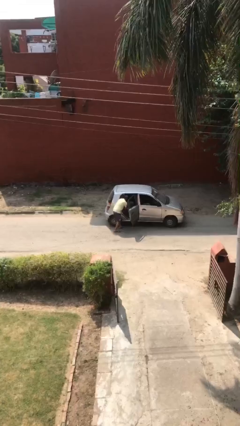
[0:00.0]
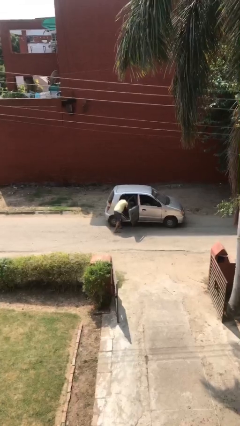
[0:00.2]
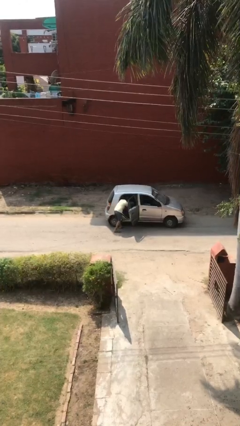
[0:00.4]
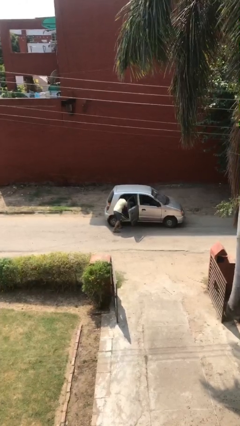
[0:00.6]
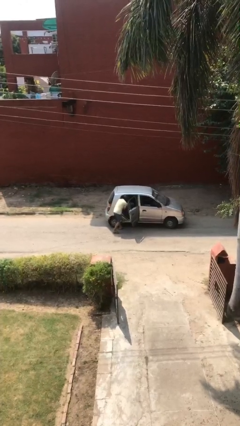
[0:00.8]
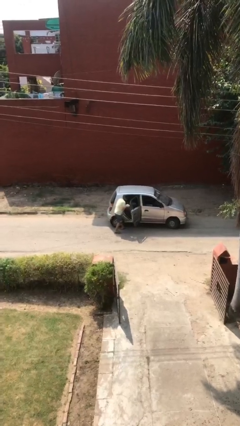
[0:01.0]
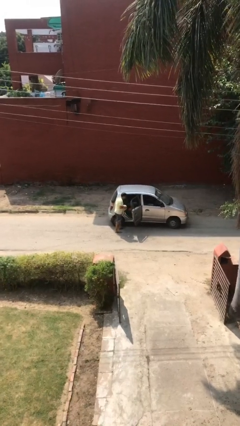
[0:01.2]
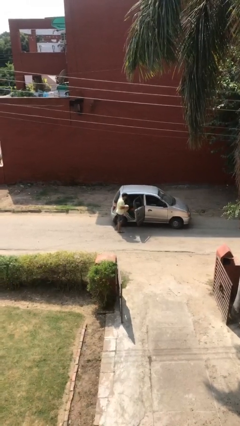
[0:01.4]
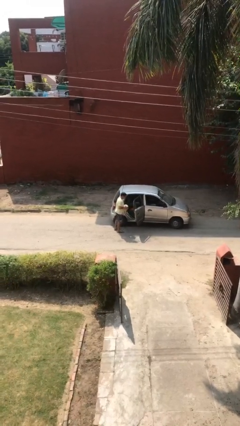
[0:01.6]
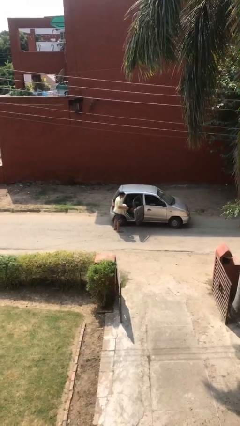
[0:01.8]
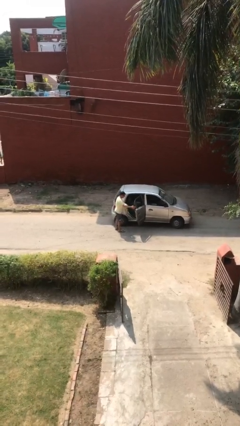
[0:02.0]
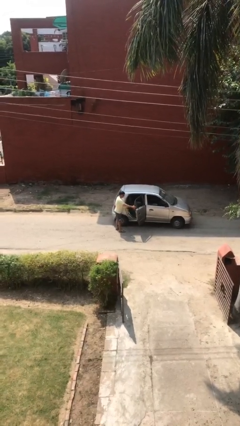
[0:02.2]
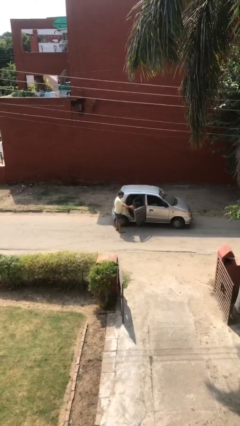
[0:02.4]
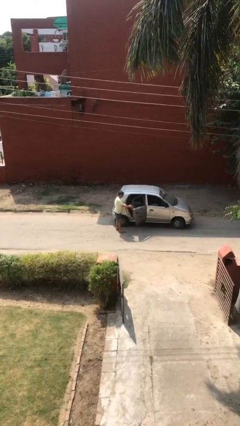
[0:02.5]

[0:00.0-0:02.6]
person unloads car

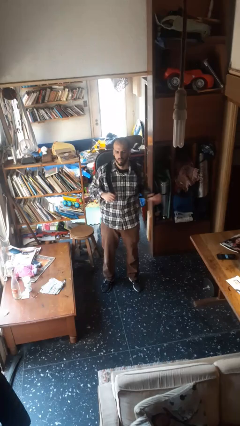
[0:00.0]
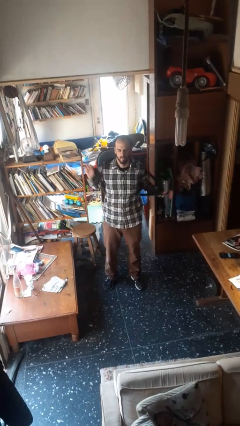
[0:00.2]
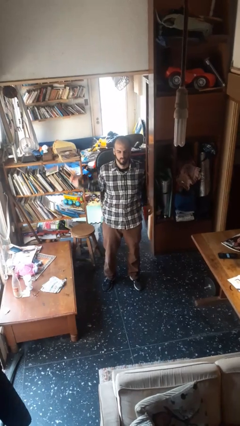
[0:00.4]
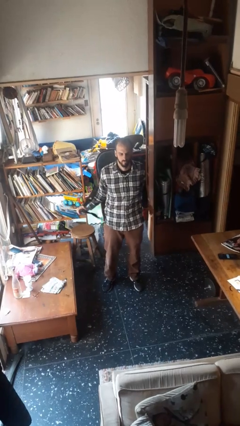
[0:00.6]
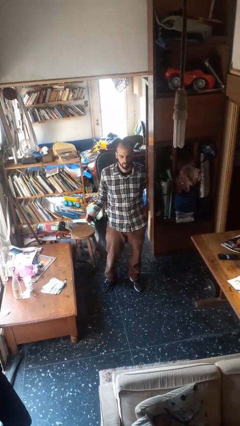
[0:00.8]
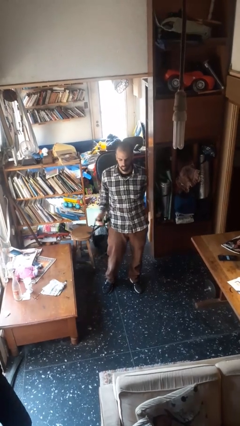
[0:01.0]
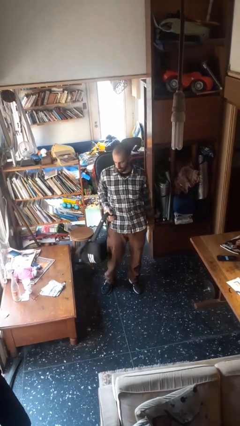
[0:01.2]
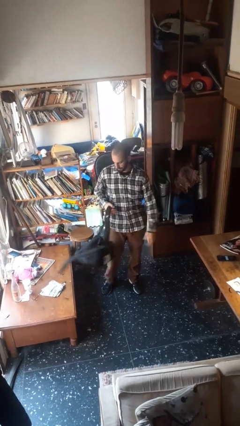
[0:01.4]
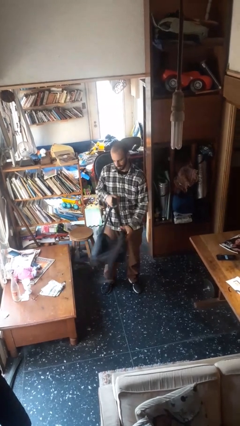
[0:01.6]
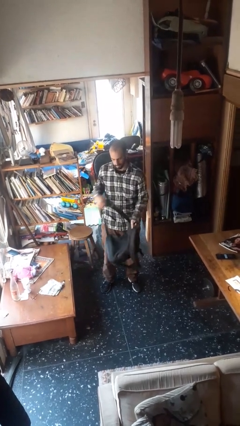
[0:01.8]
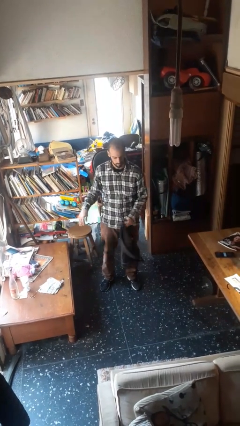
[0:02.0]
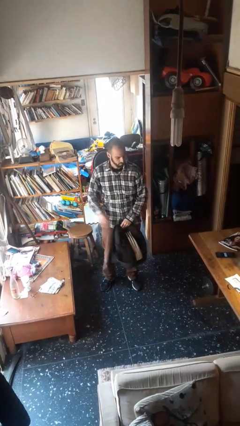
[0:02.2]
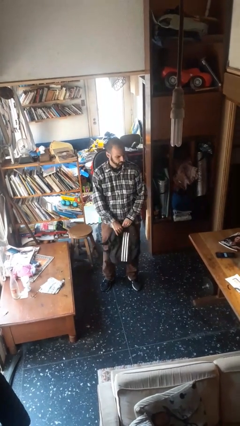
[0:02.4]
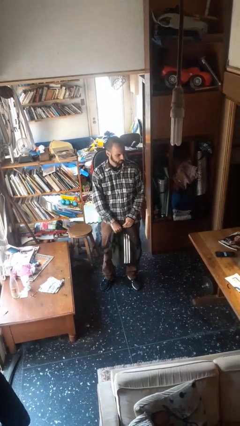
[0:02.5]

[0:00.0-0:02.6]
person takes off backpack

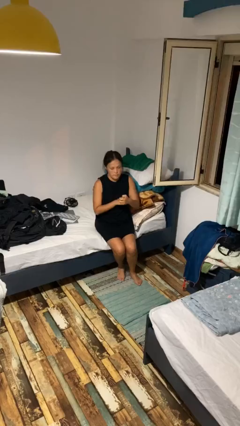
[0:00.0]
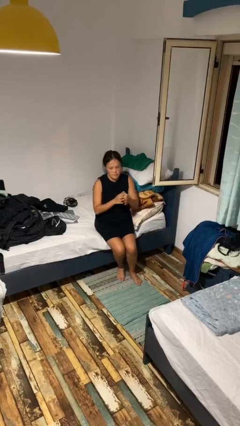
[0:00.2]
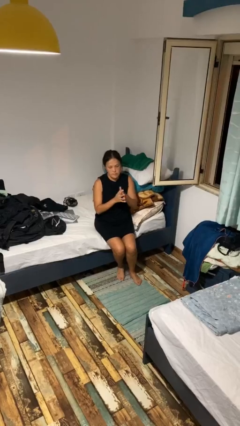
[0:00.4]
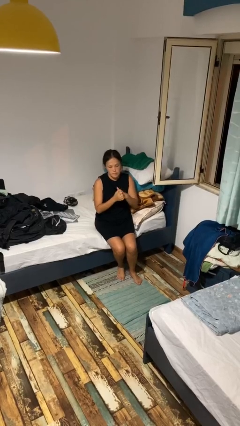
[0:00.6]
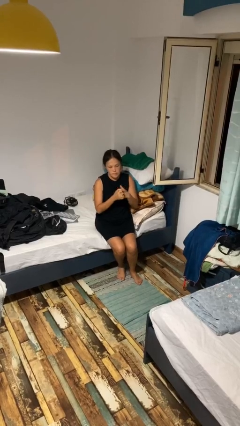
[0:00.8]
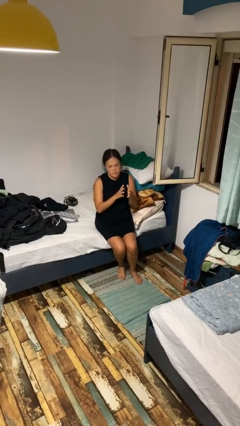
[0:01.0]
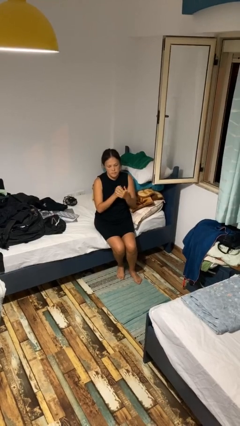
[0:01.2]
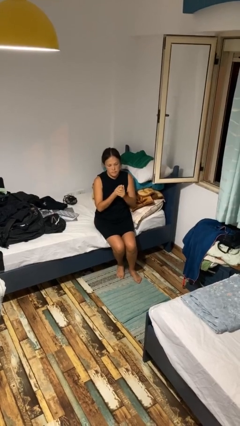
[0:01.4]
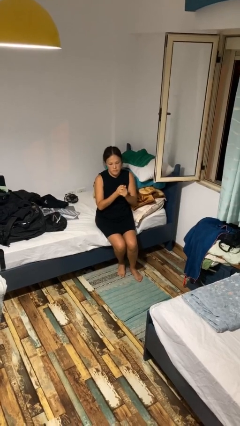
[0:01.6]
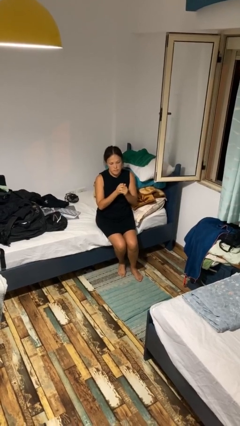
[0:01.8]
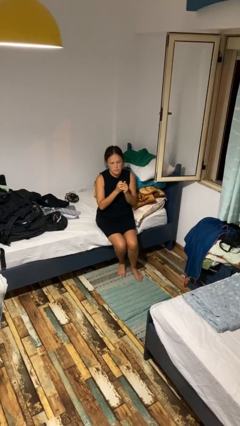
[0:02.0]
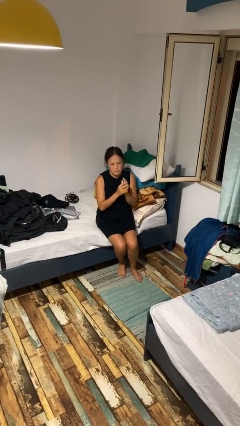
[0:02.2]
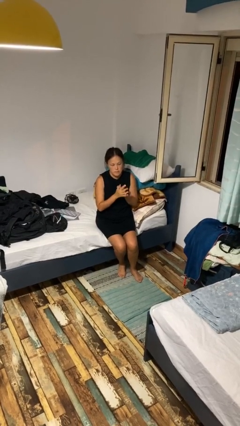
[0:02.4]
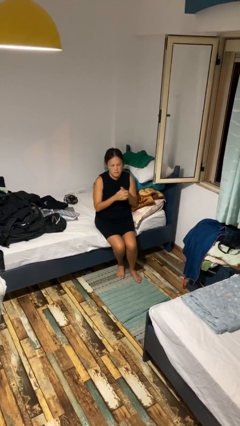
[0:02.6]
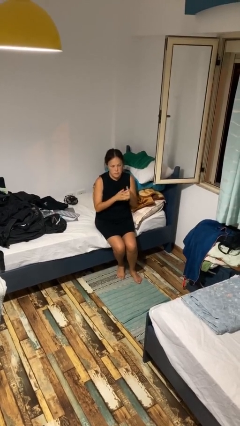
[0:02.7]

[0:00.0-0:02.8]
person cracks knuckles

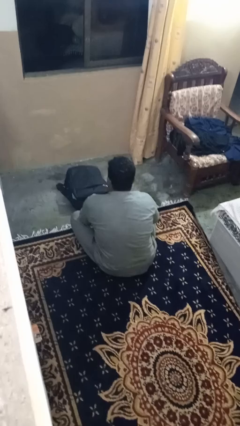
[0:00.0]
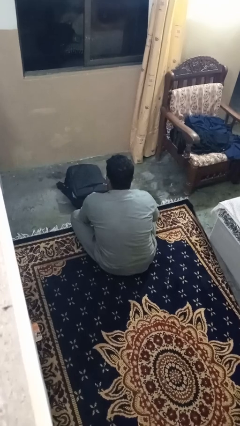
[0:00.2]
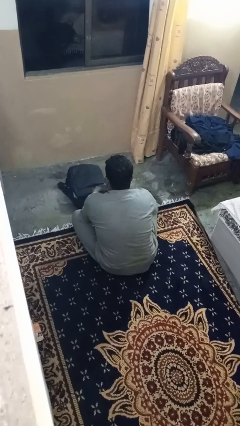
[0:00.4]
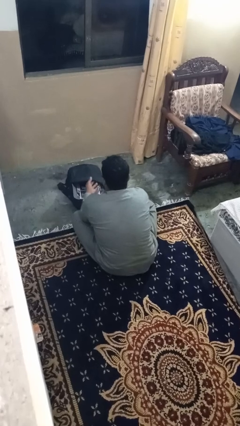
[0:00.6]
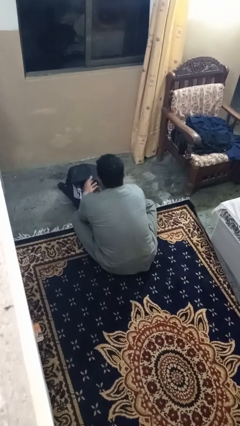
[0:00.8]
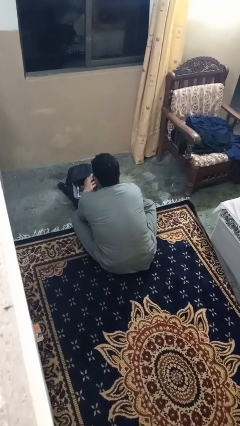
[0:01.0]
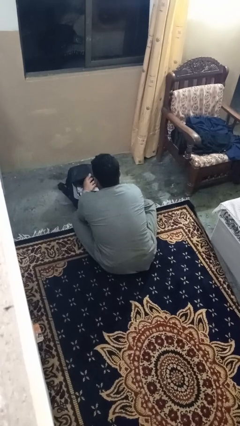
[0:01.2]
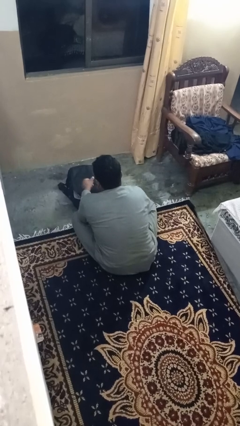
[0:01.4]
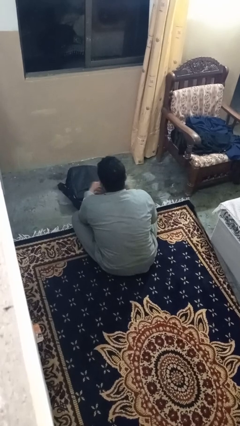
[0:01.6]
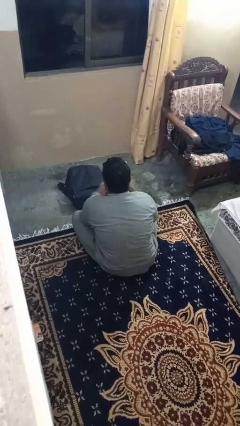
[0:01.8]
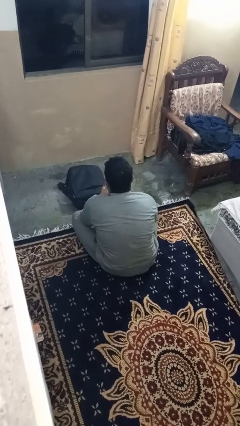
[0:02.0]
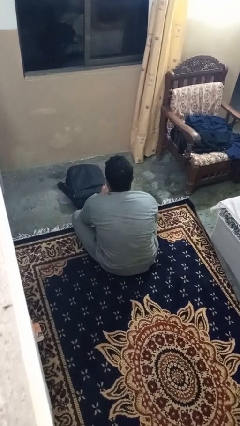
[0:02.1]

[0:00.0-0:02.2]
person takes object from bag

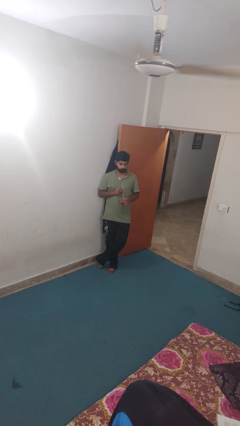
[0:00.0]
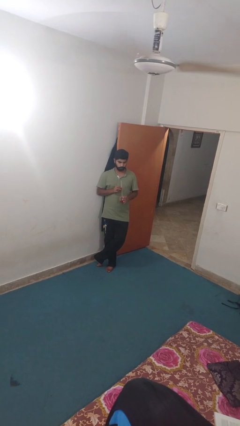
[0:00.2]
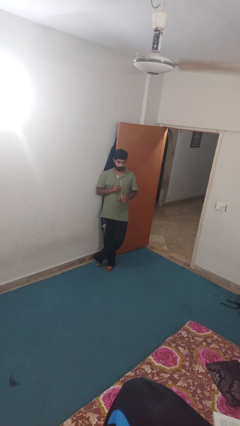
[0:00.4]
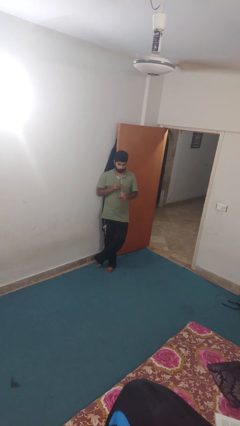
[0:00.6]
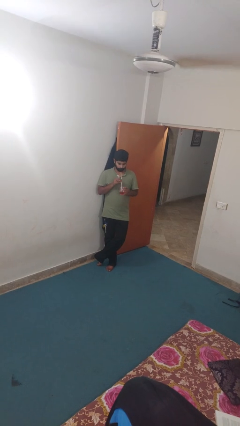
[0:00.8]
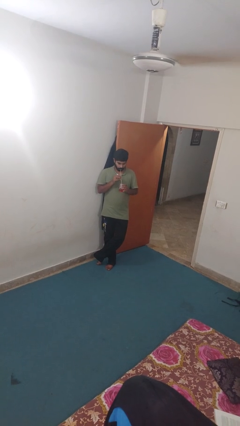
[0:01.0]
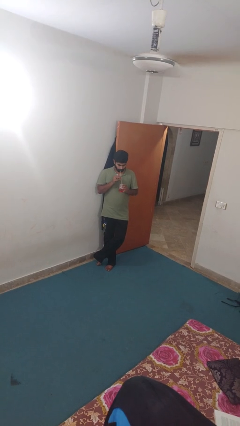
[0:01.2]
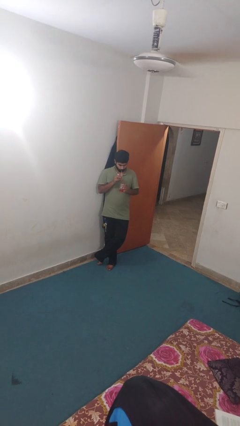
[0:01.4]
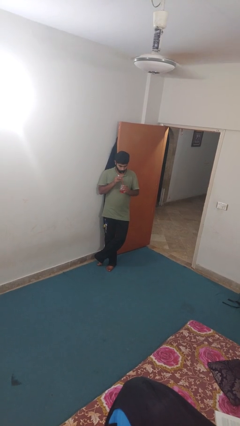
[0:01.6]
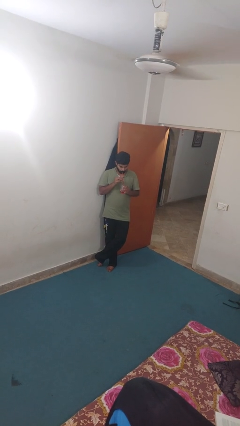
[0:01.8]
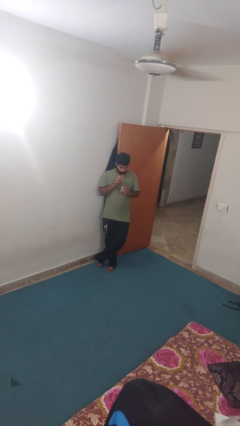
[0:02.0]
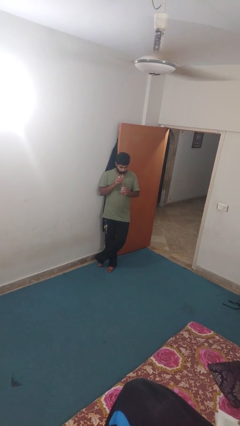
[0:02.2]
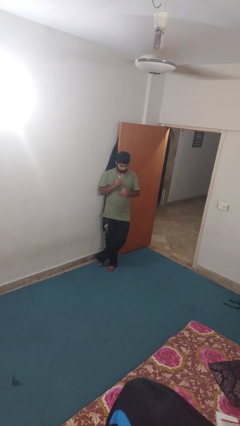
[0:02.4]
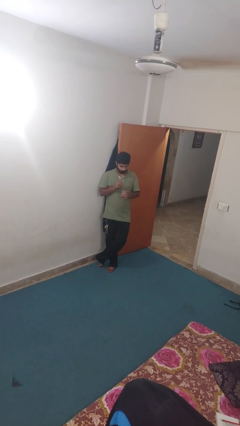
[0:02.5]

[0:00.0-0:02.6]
person drinks from straw

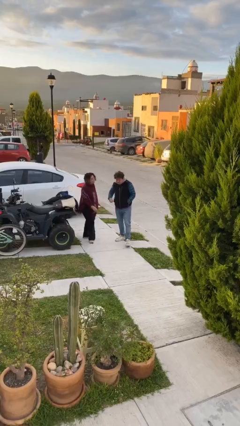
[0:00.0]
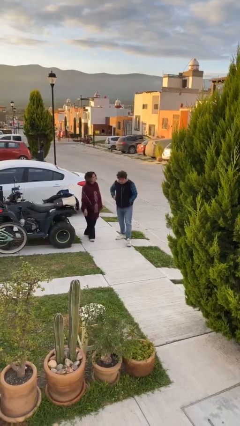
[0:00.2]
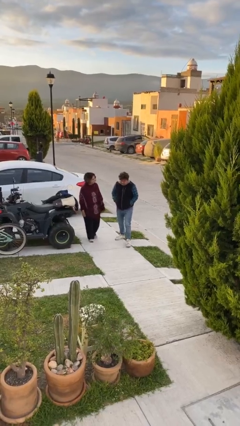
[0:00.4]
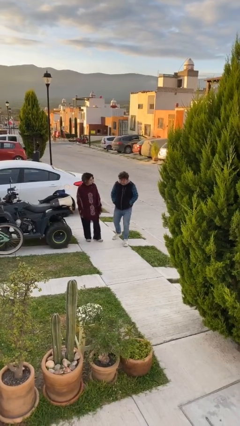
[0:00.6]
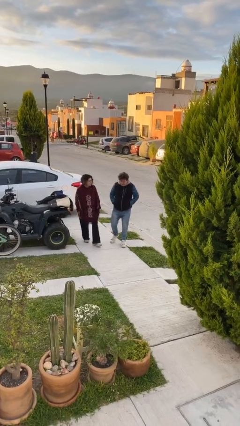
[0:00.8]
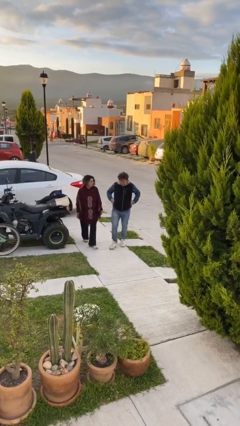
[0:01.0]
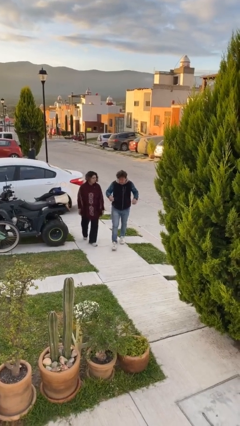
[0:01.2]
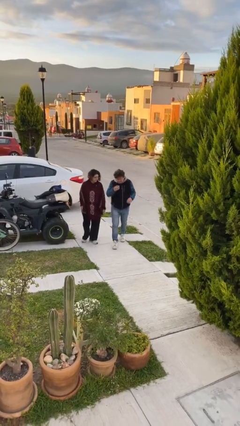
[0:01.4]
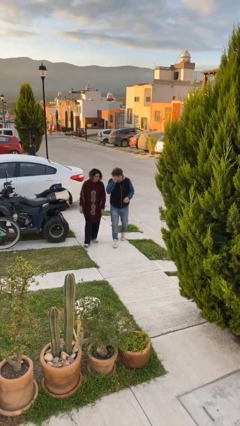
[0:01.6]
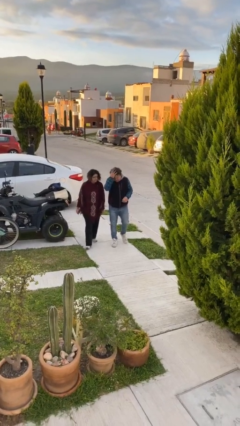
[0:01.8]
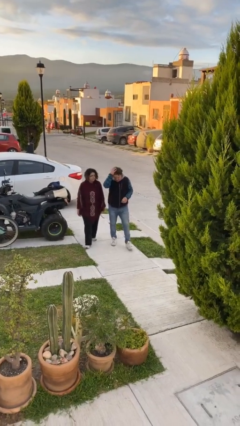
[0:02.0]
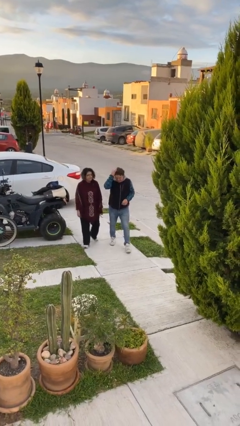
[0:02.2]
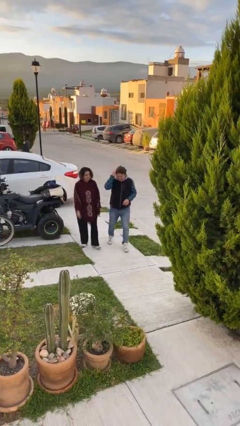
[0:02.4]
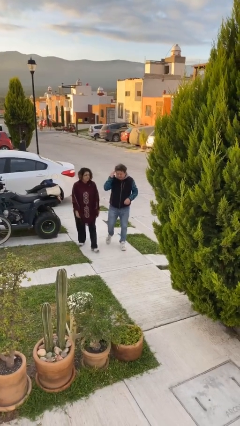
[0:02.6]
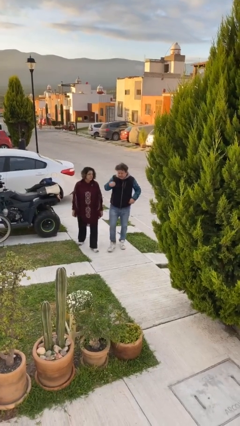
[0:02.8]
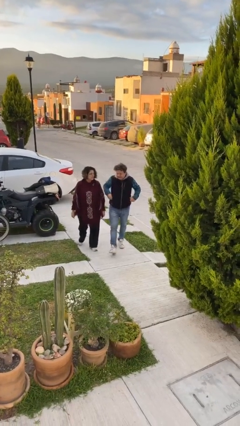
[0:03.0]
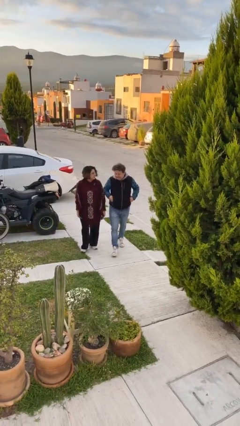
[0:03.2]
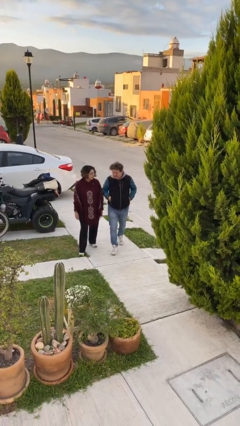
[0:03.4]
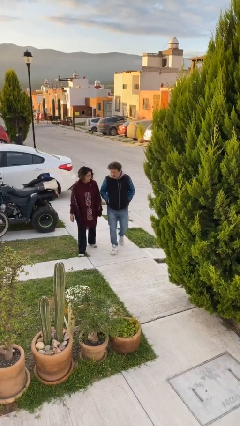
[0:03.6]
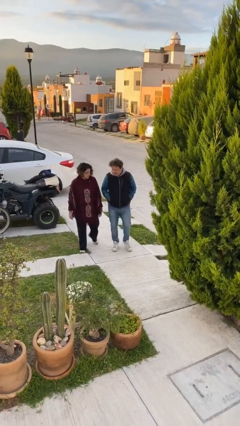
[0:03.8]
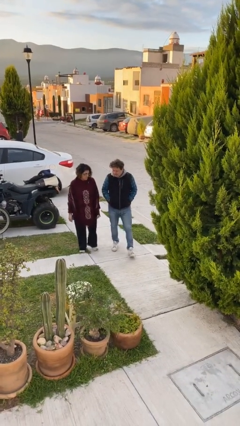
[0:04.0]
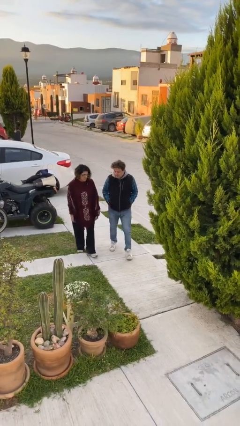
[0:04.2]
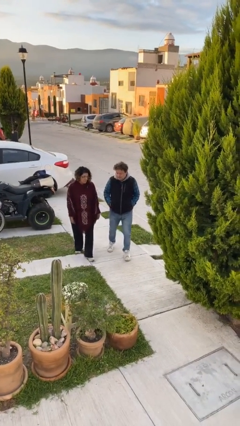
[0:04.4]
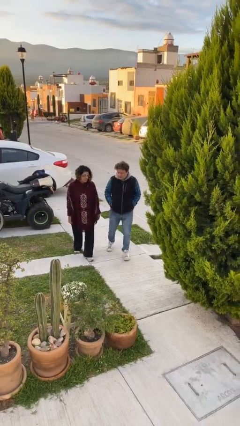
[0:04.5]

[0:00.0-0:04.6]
person talks to person
